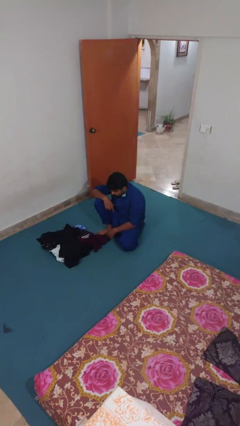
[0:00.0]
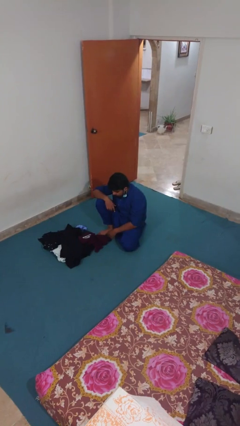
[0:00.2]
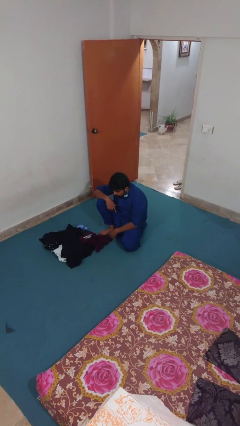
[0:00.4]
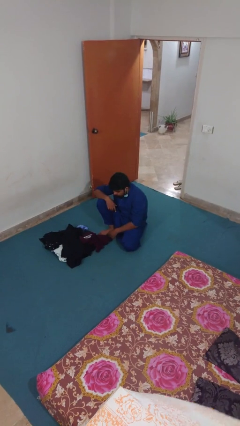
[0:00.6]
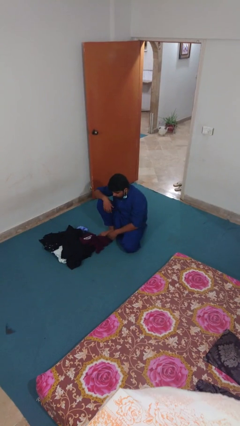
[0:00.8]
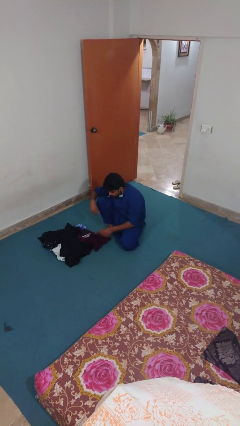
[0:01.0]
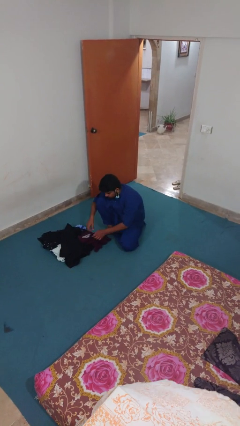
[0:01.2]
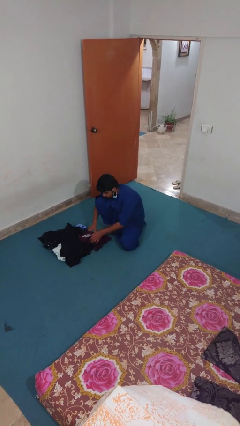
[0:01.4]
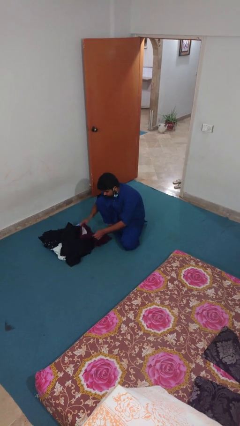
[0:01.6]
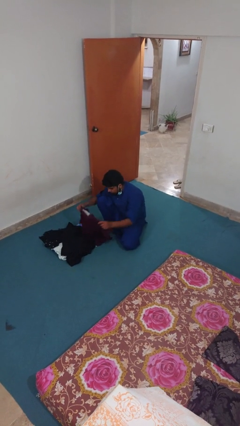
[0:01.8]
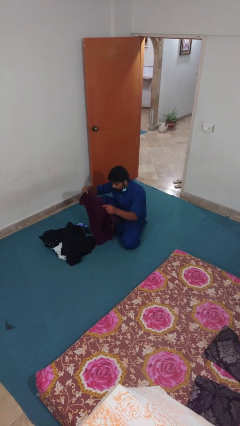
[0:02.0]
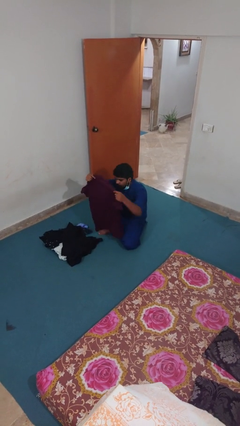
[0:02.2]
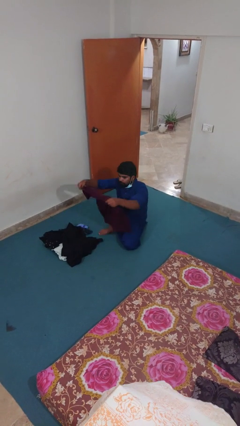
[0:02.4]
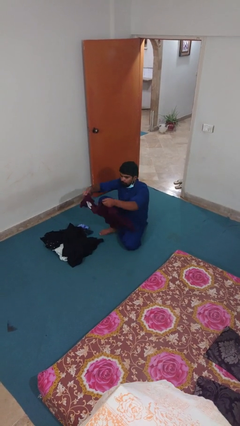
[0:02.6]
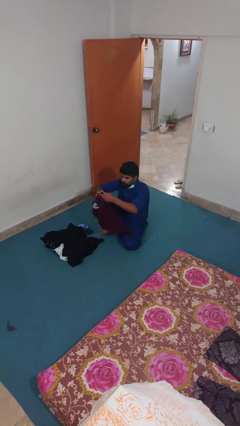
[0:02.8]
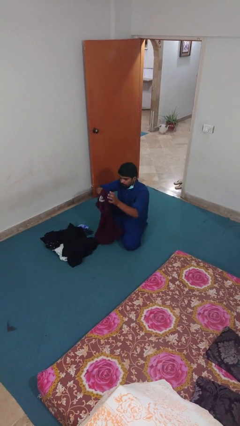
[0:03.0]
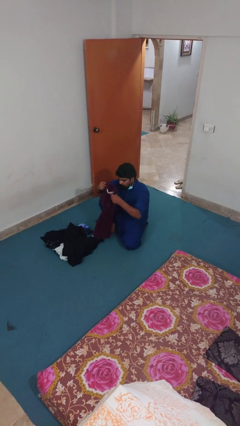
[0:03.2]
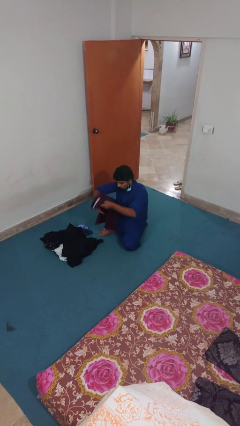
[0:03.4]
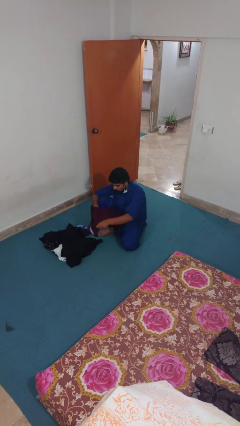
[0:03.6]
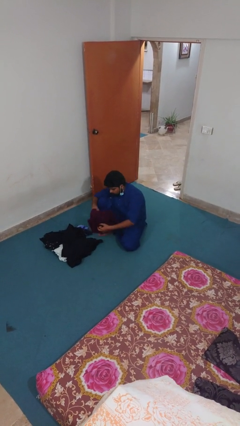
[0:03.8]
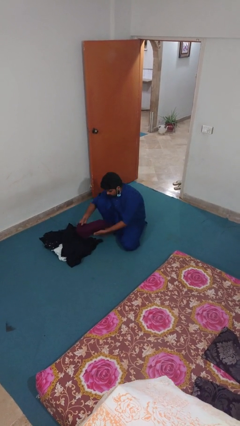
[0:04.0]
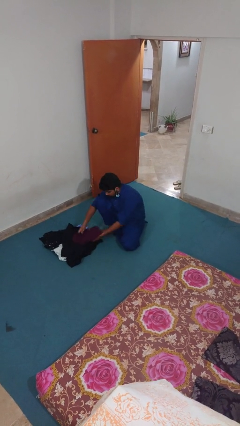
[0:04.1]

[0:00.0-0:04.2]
person folds shirt

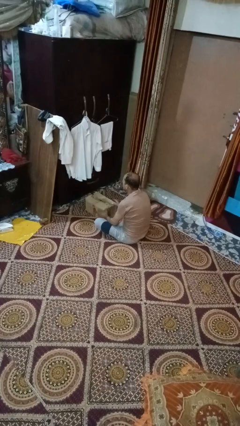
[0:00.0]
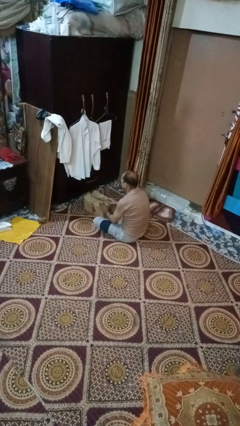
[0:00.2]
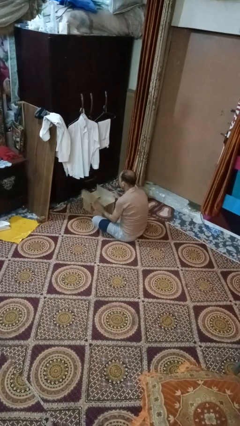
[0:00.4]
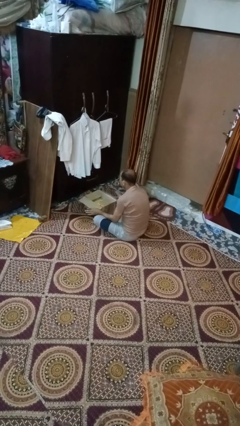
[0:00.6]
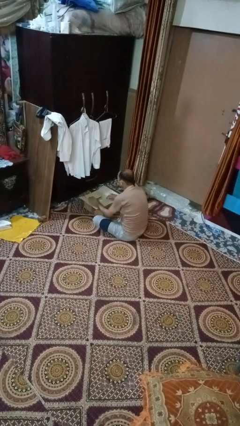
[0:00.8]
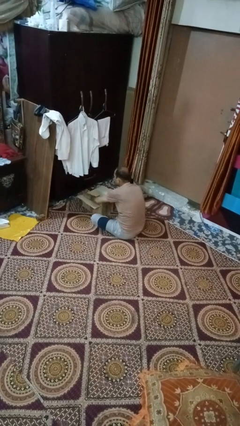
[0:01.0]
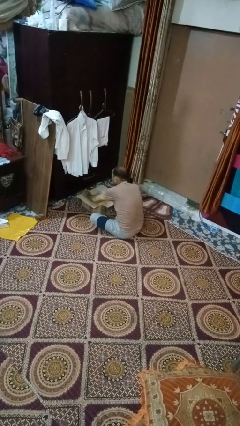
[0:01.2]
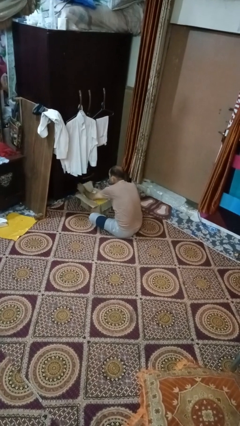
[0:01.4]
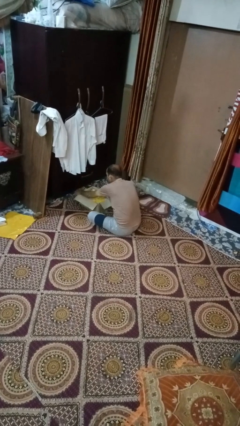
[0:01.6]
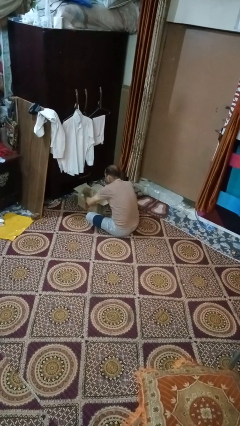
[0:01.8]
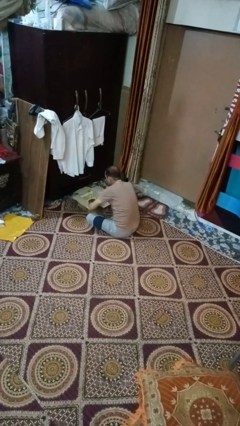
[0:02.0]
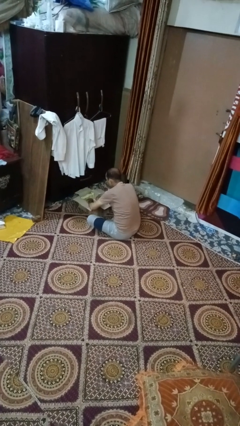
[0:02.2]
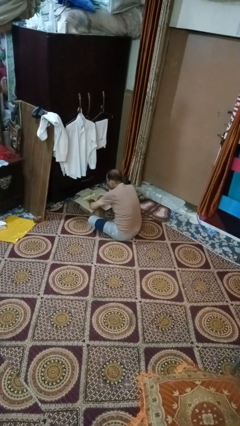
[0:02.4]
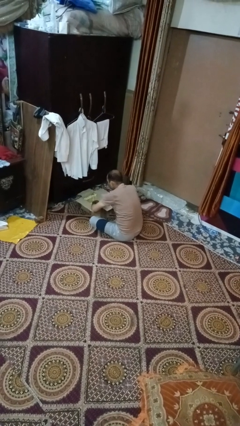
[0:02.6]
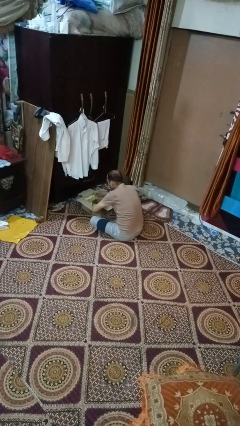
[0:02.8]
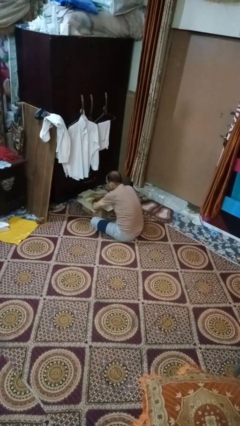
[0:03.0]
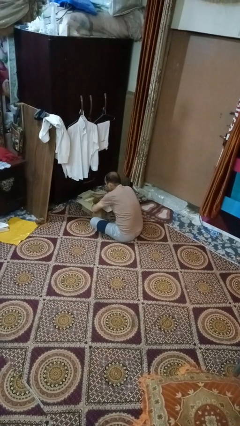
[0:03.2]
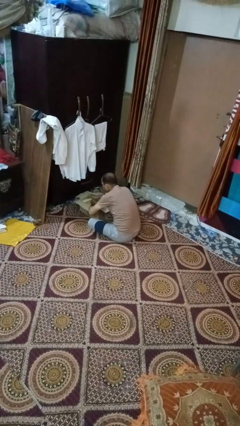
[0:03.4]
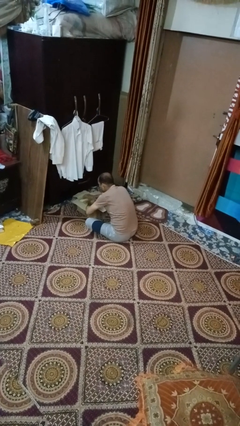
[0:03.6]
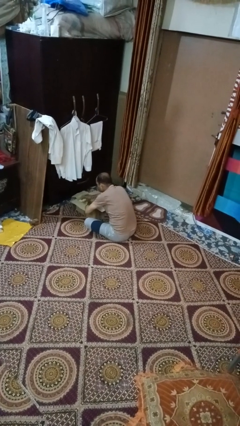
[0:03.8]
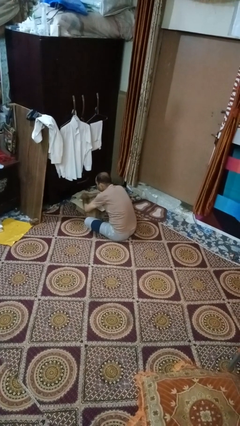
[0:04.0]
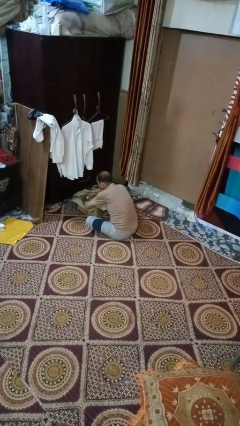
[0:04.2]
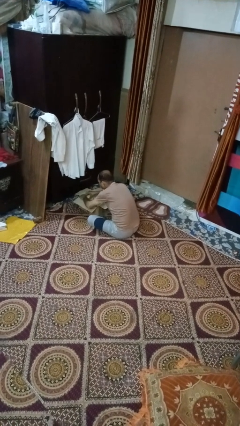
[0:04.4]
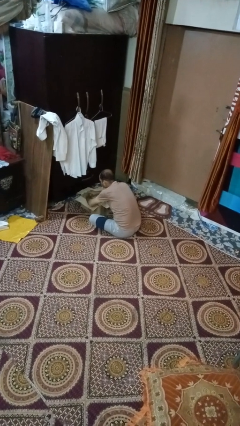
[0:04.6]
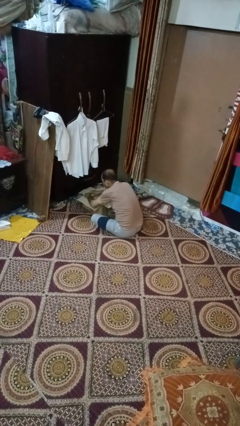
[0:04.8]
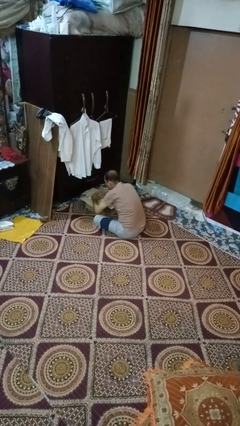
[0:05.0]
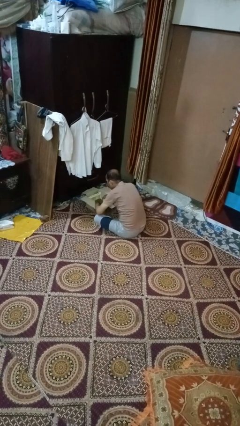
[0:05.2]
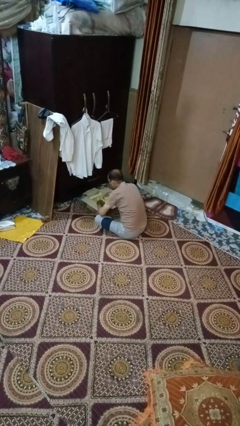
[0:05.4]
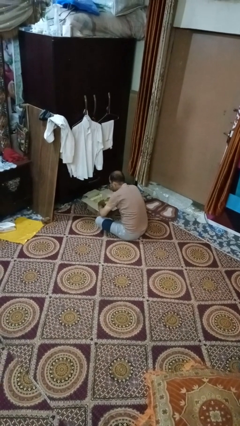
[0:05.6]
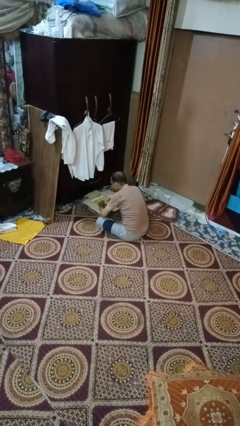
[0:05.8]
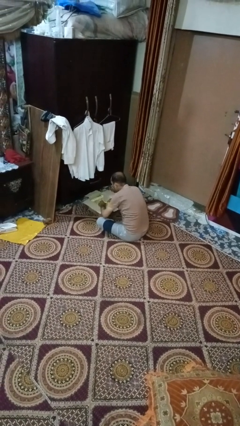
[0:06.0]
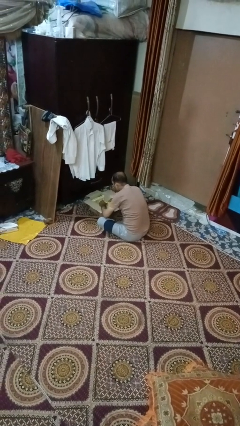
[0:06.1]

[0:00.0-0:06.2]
person searches in box

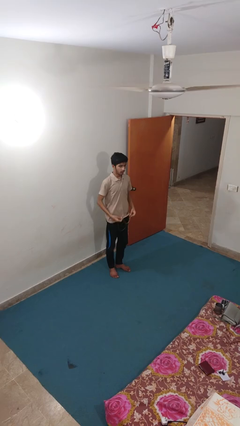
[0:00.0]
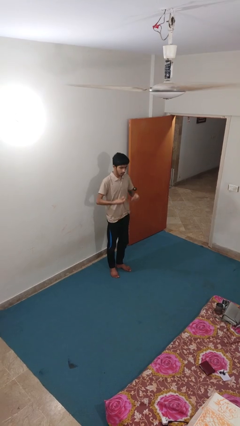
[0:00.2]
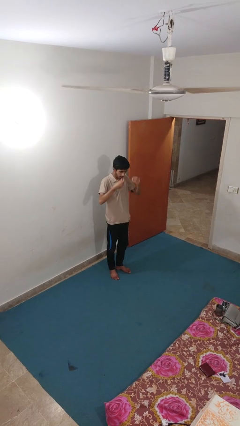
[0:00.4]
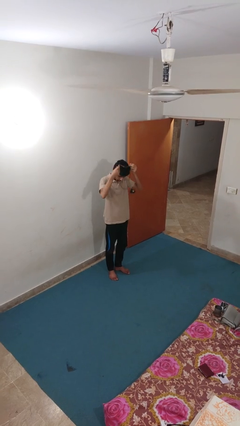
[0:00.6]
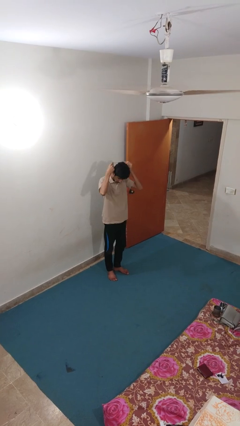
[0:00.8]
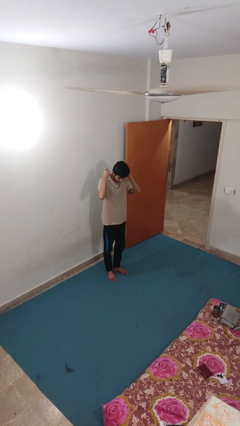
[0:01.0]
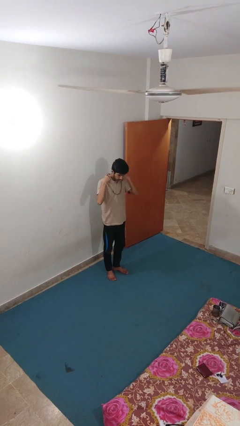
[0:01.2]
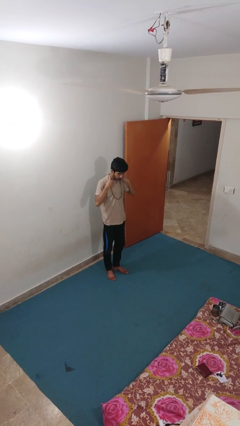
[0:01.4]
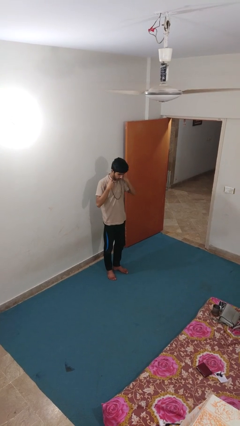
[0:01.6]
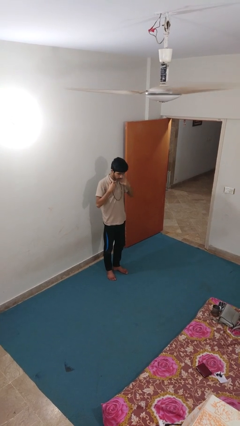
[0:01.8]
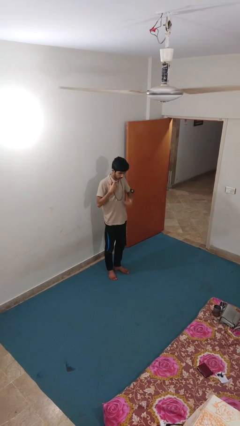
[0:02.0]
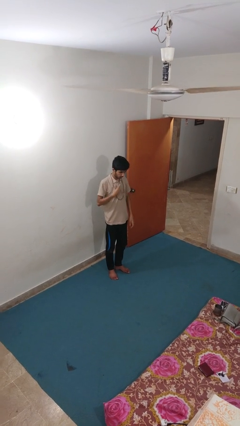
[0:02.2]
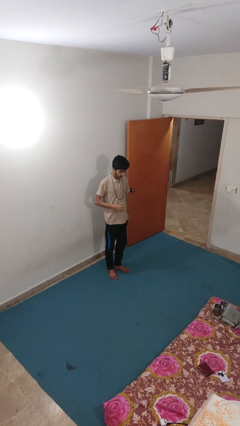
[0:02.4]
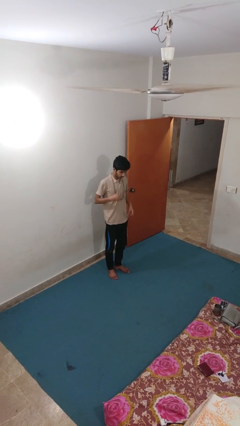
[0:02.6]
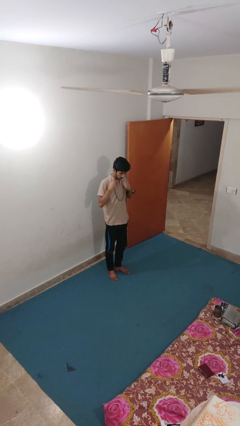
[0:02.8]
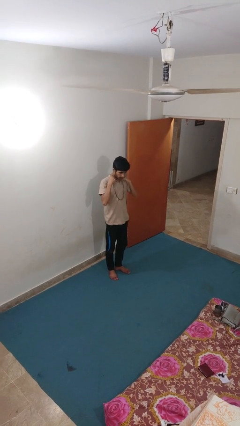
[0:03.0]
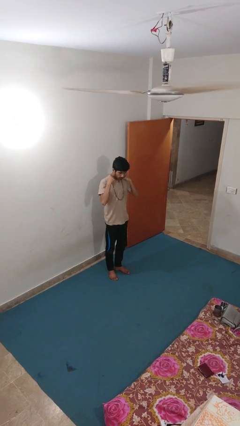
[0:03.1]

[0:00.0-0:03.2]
person puts on necklace

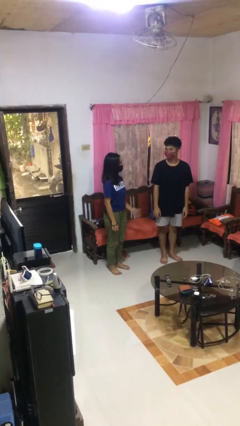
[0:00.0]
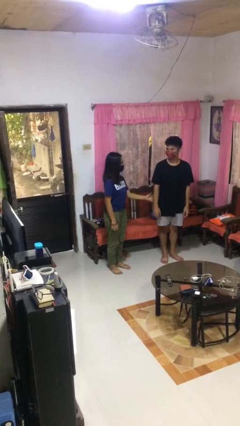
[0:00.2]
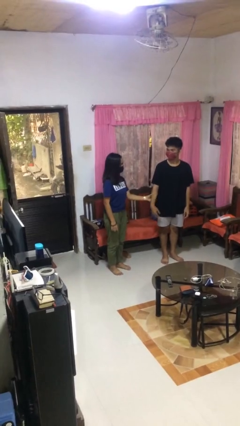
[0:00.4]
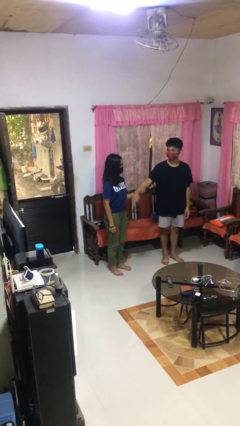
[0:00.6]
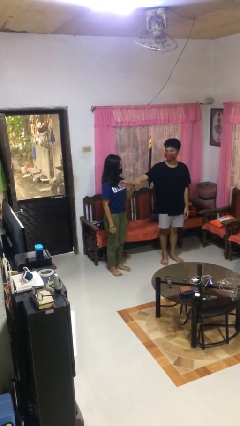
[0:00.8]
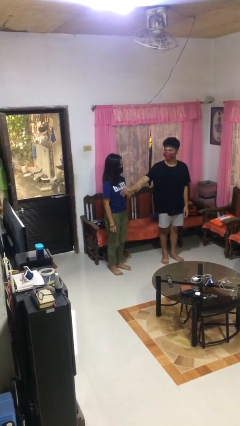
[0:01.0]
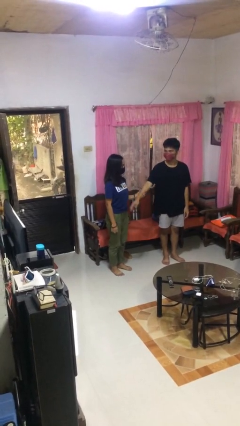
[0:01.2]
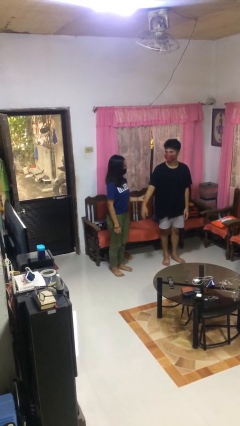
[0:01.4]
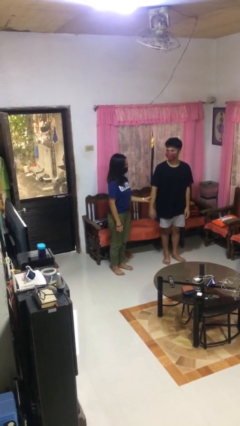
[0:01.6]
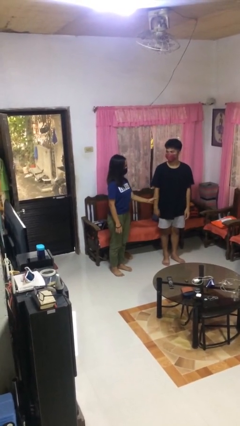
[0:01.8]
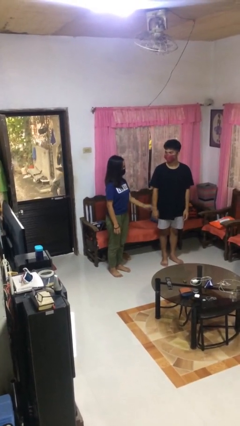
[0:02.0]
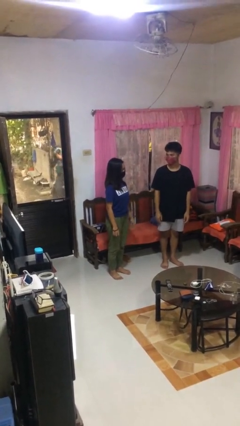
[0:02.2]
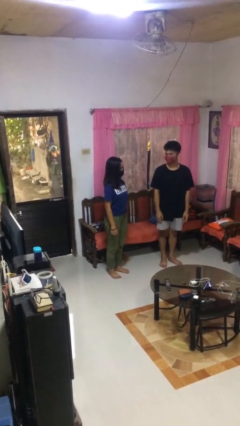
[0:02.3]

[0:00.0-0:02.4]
person grabs person by forearm

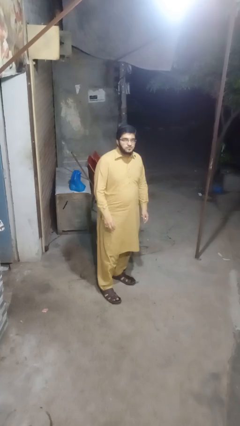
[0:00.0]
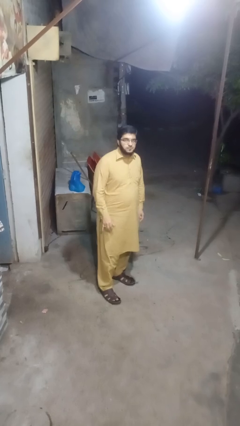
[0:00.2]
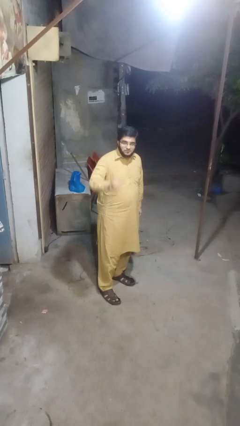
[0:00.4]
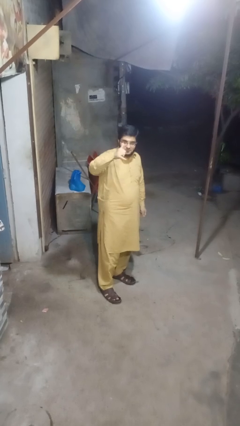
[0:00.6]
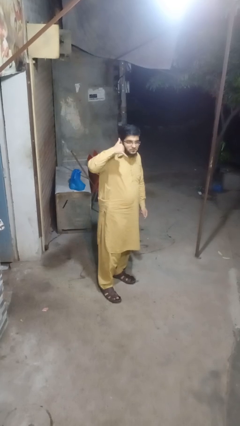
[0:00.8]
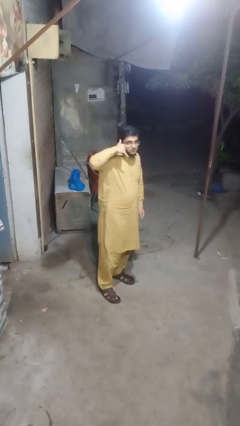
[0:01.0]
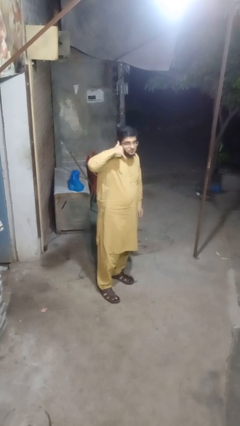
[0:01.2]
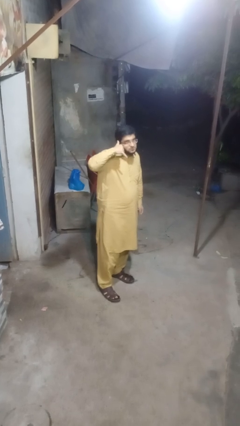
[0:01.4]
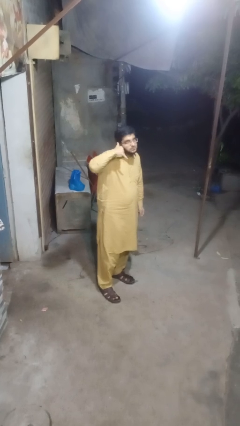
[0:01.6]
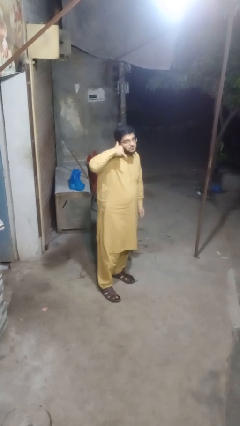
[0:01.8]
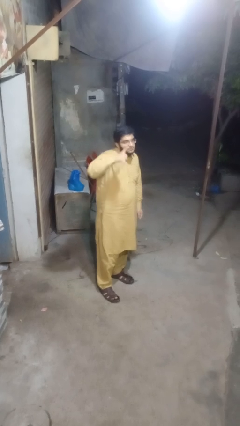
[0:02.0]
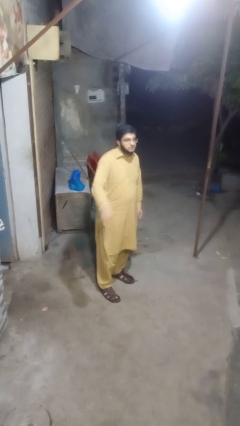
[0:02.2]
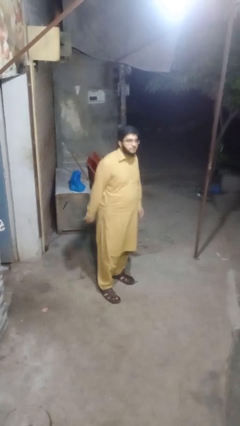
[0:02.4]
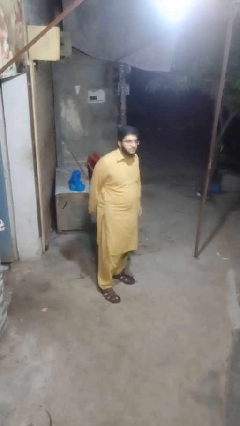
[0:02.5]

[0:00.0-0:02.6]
person gestures call me
